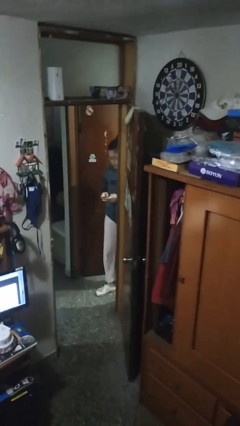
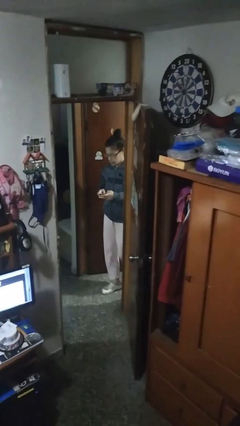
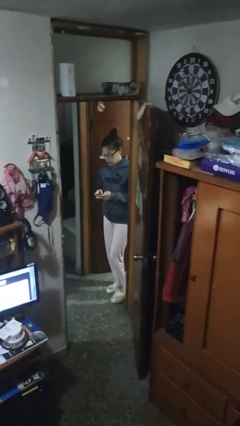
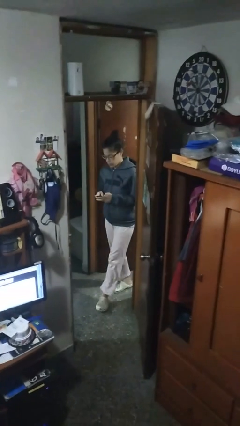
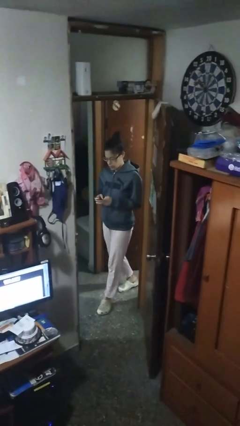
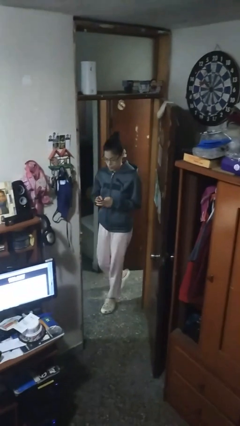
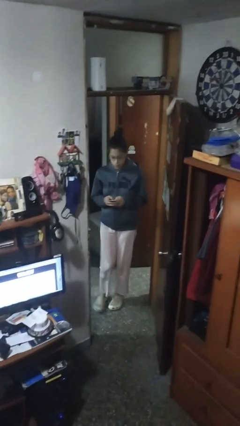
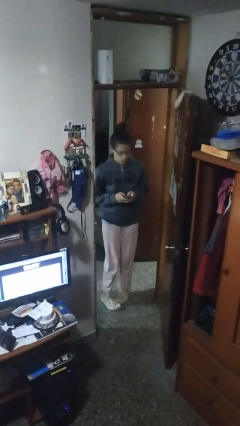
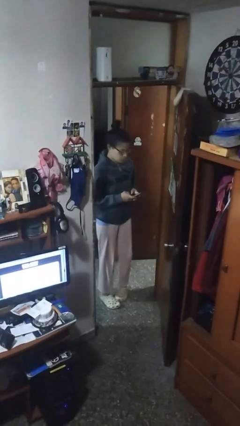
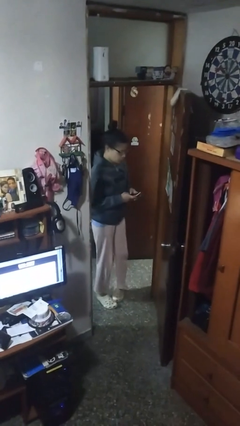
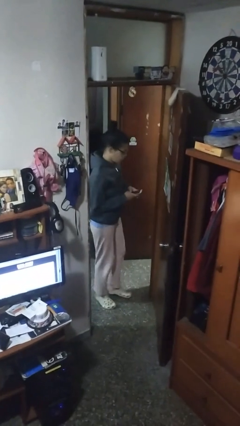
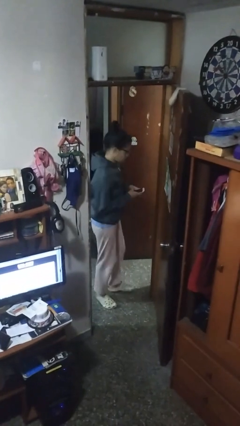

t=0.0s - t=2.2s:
person enters scene through structure

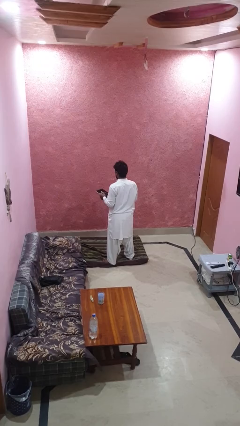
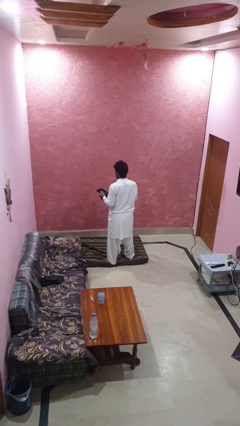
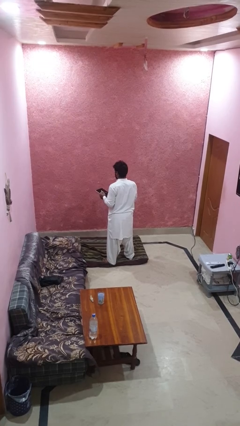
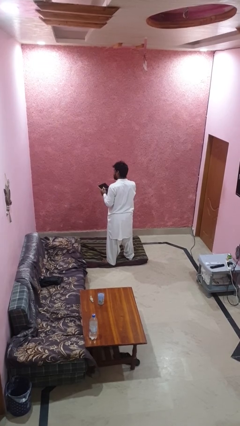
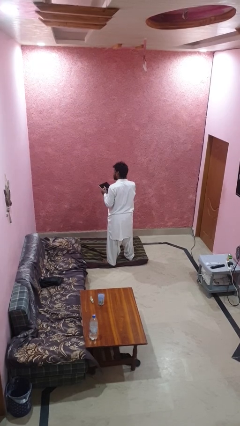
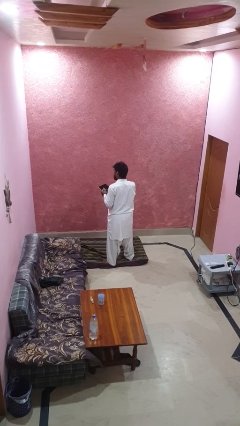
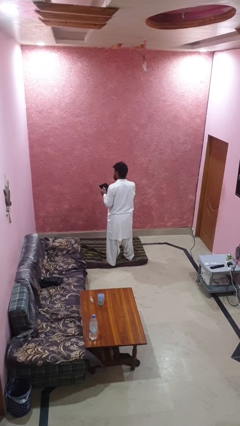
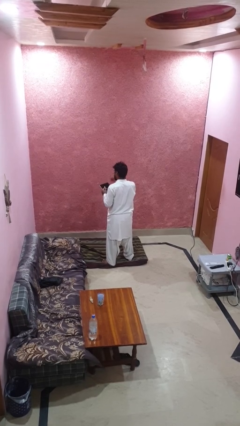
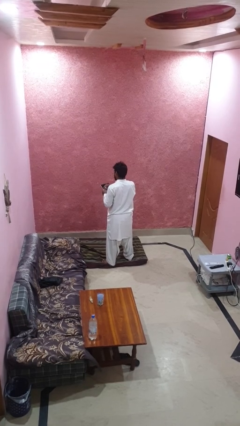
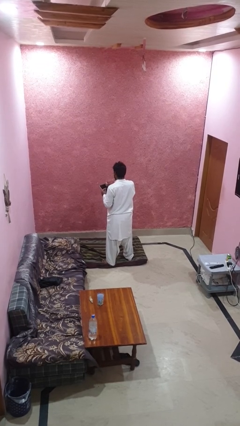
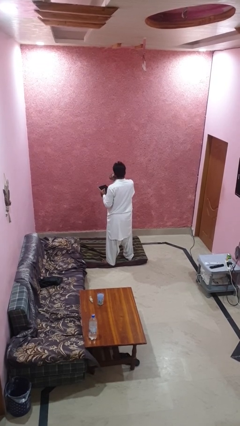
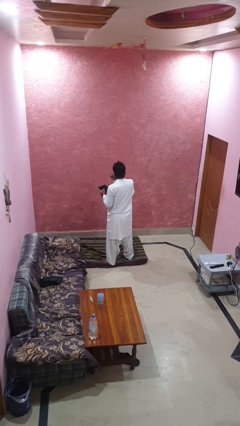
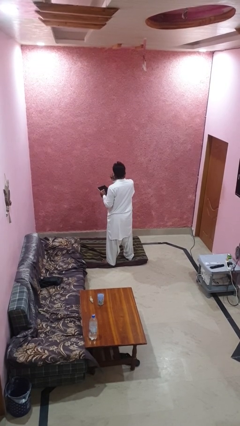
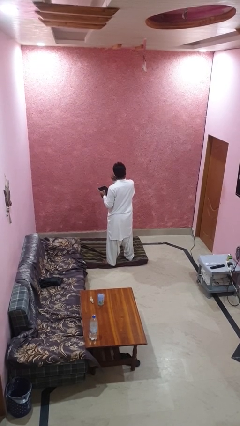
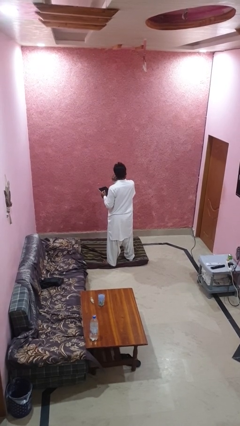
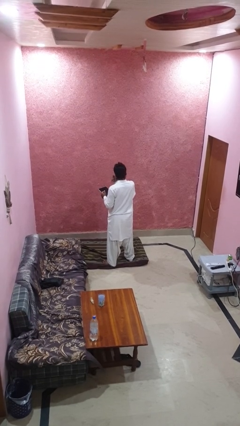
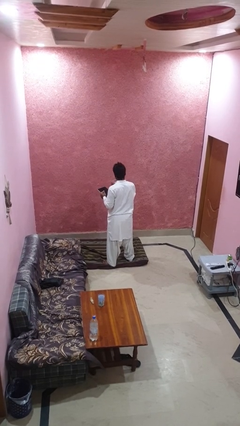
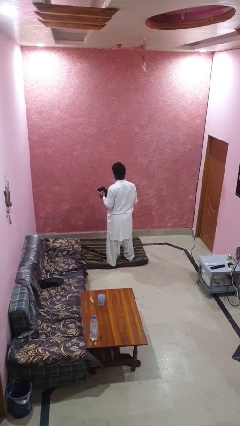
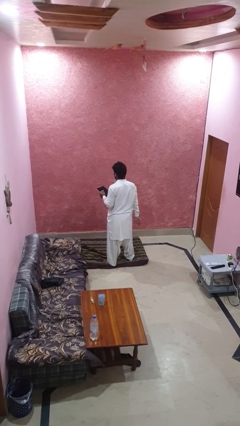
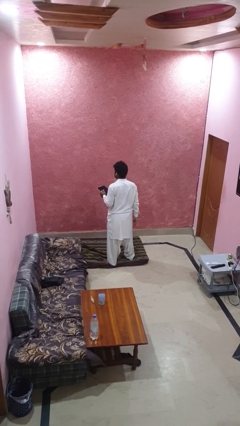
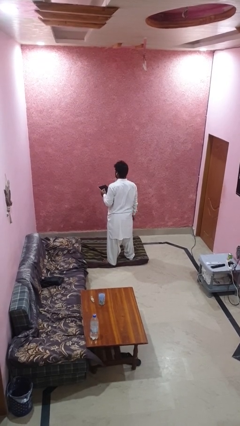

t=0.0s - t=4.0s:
person puts on headphones

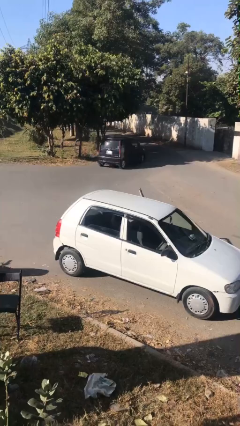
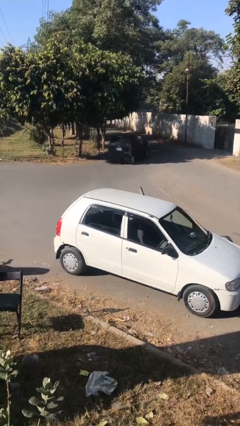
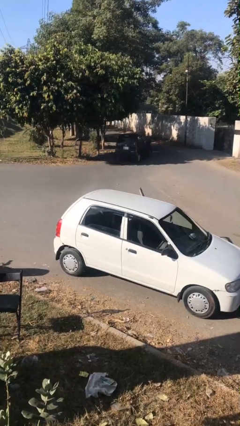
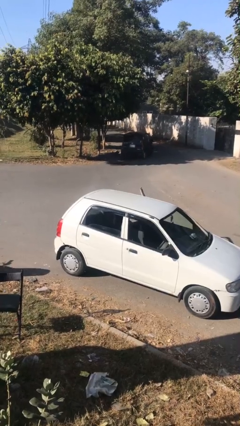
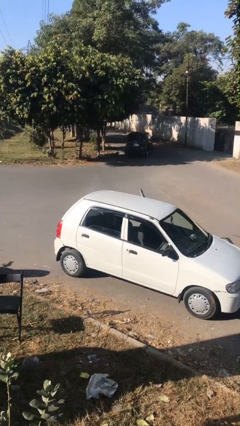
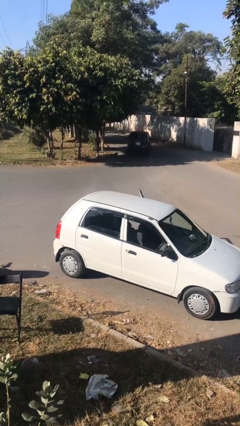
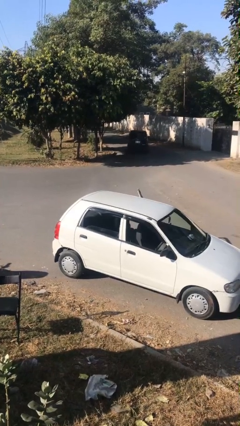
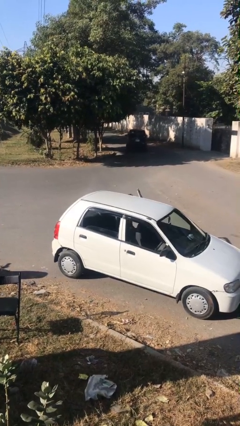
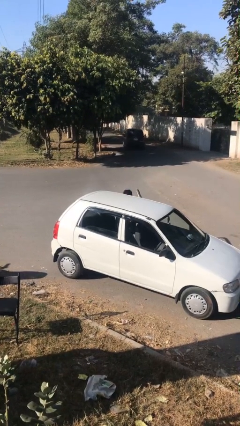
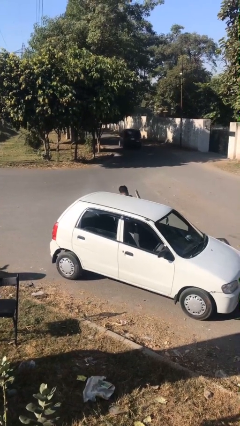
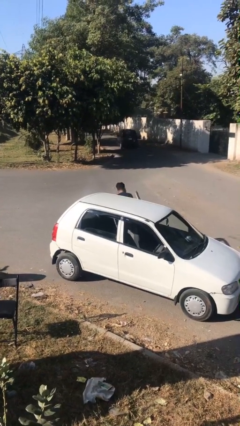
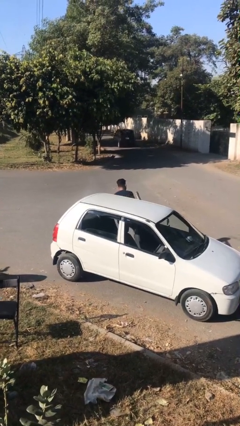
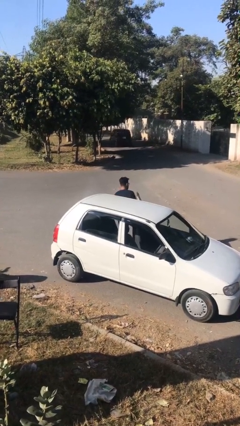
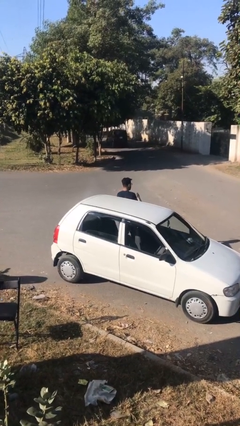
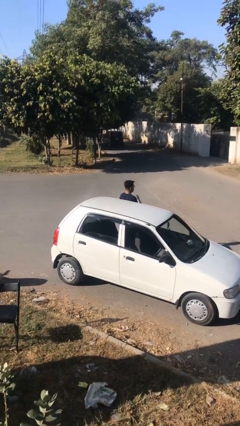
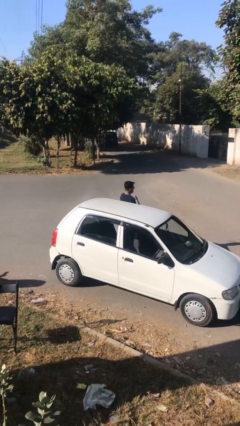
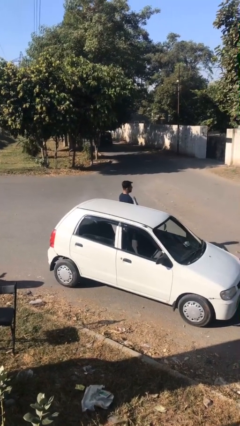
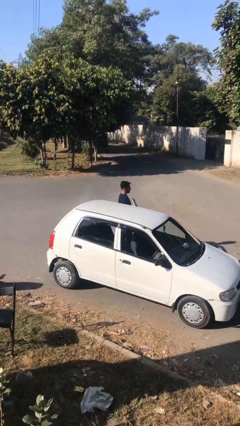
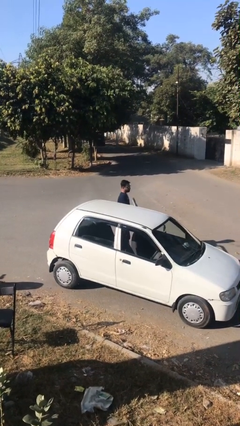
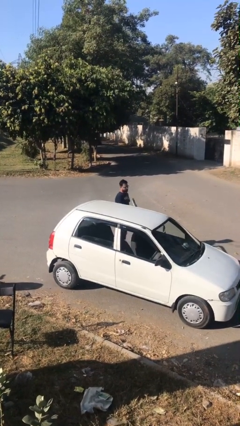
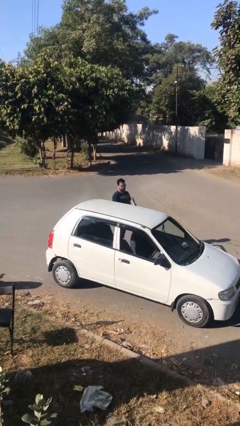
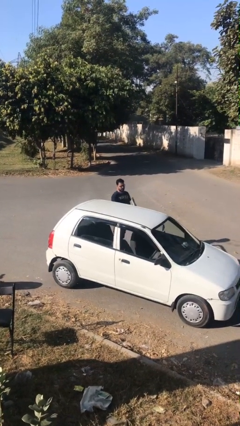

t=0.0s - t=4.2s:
person exits car

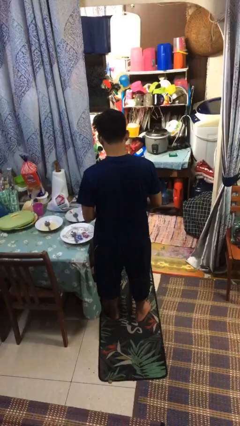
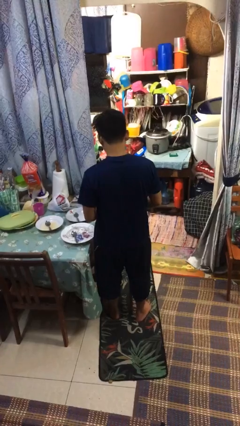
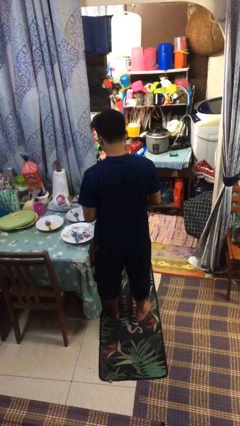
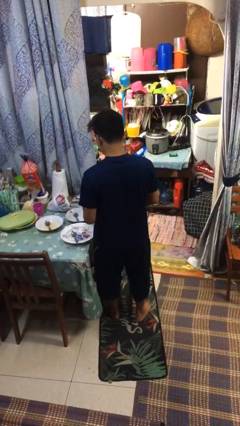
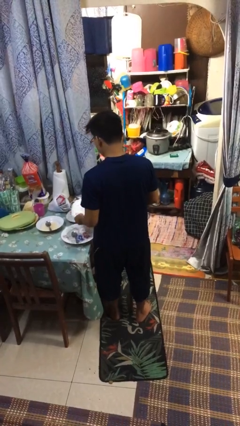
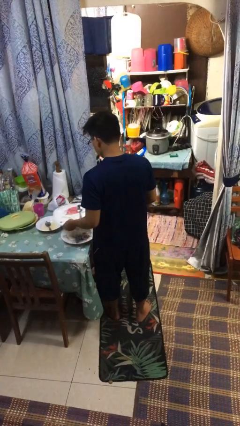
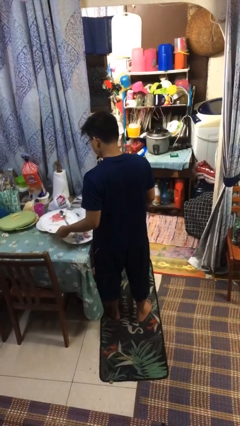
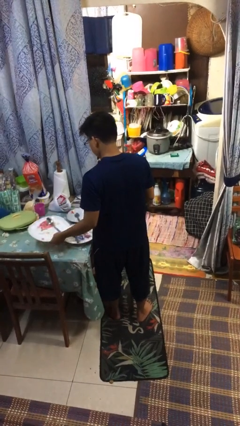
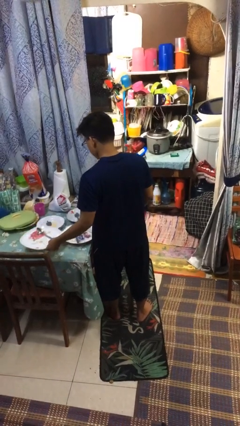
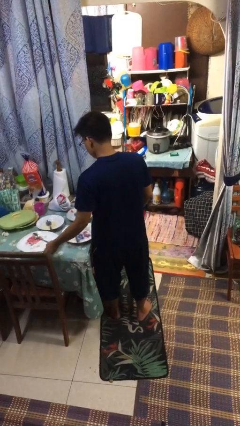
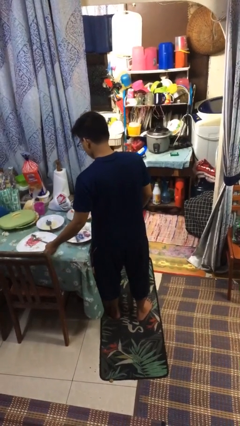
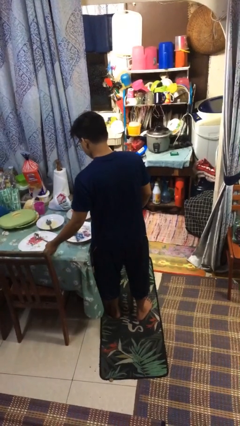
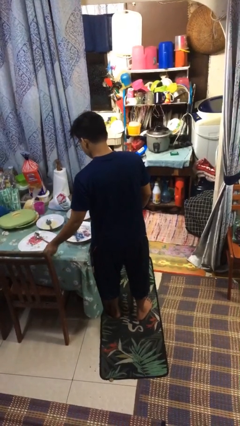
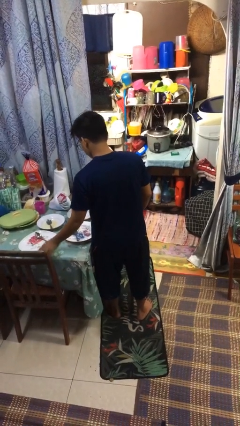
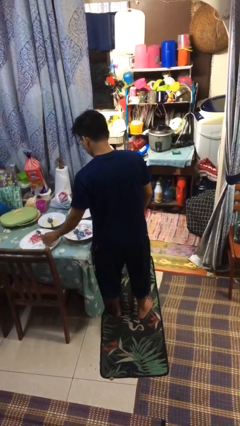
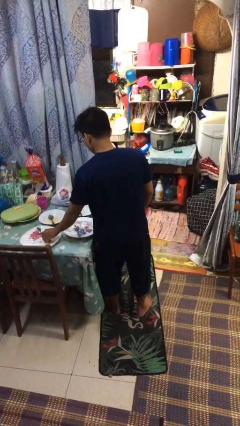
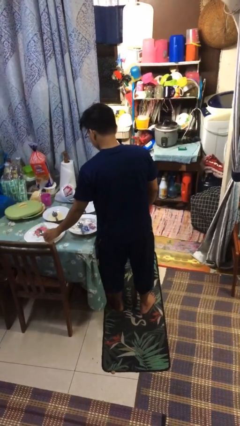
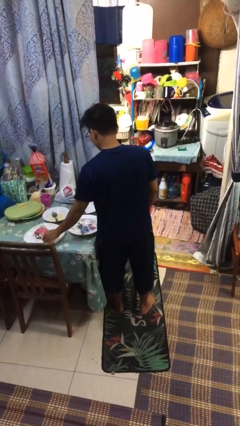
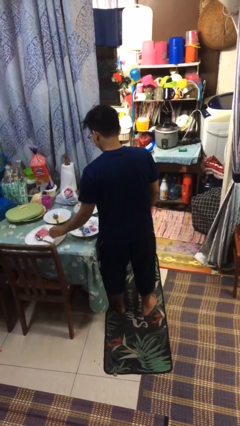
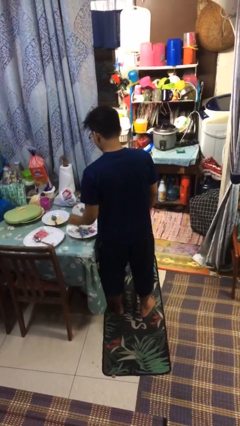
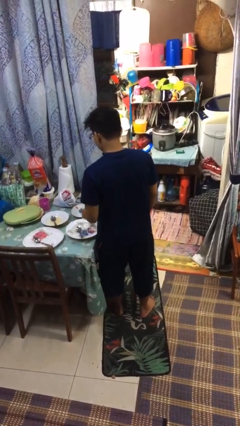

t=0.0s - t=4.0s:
person sets table

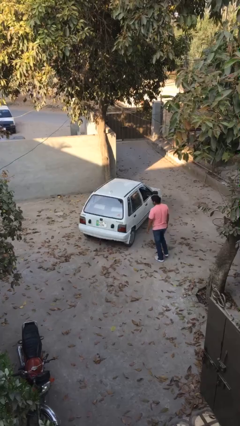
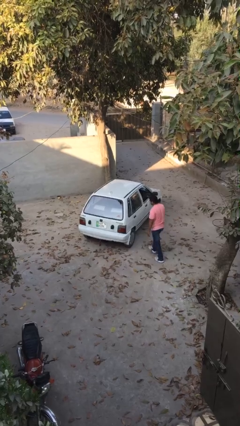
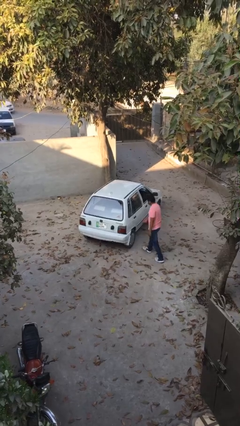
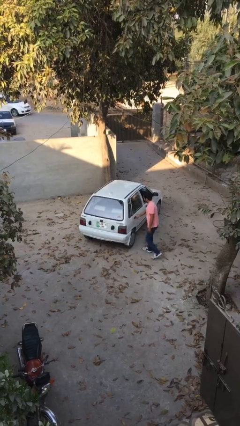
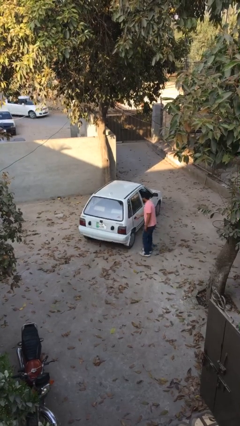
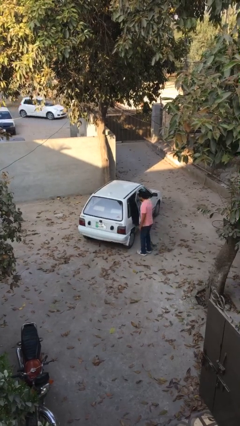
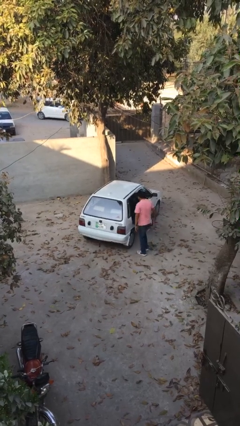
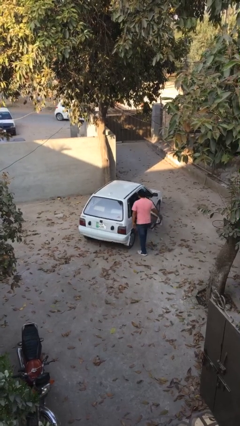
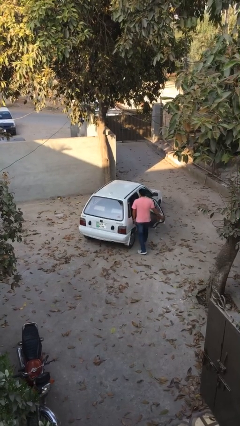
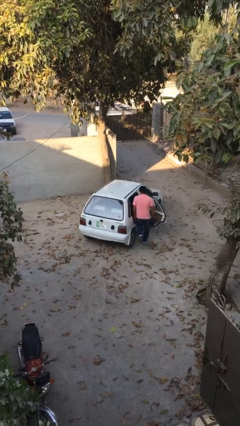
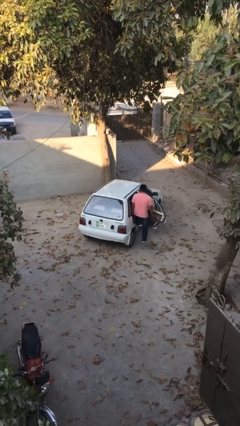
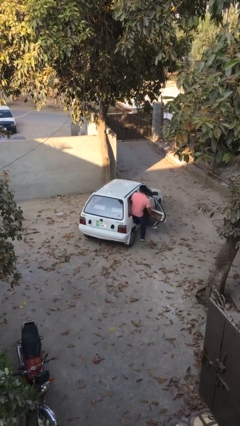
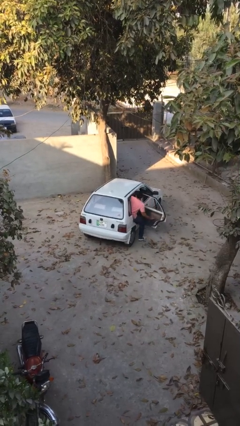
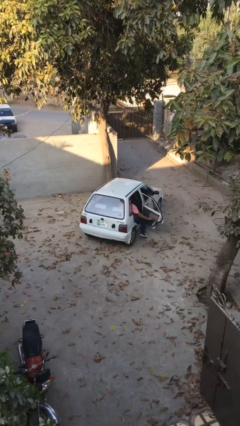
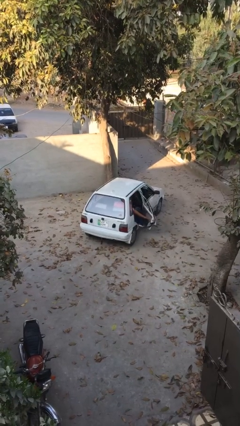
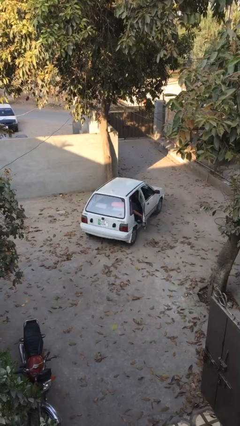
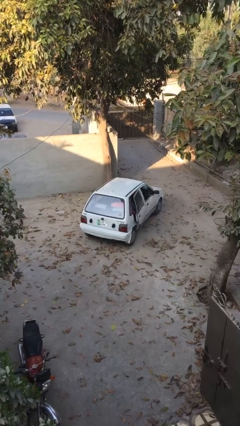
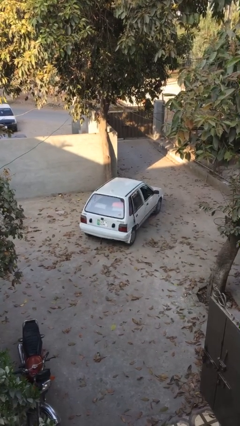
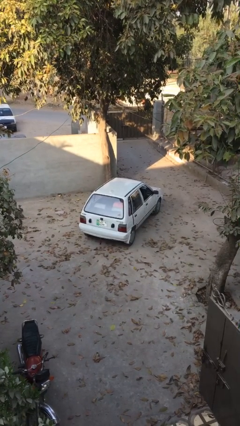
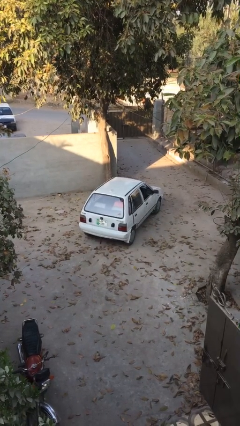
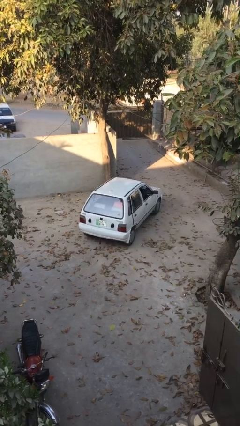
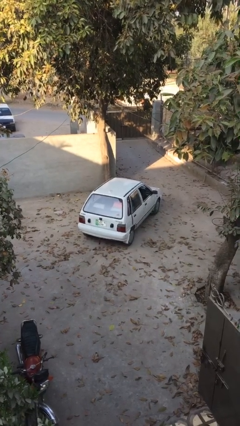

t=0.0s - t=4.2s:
car picks up person
